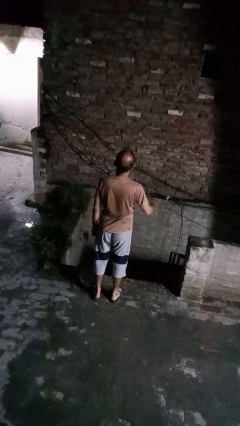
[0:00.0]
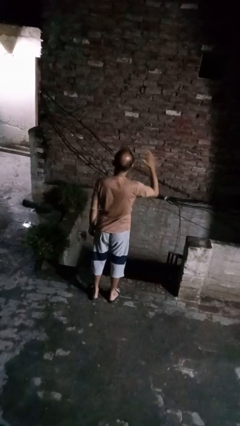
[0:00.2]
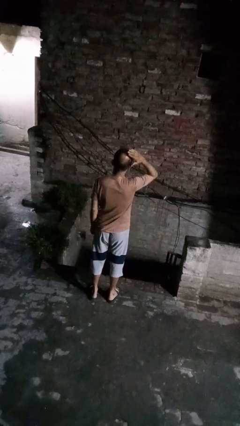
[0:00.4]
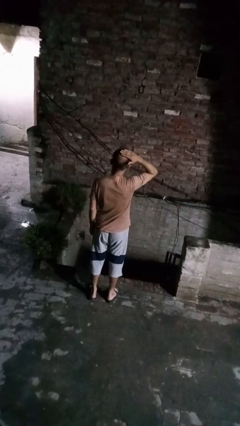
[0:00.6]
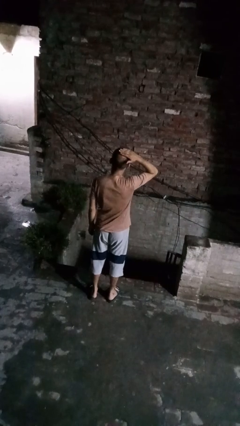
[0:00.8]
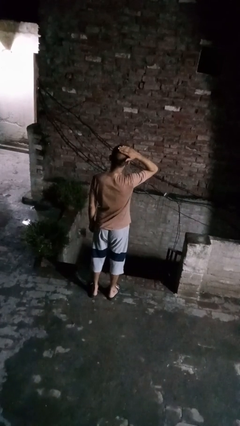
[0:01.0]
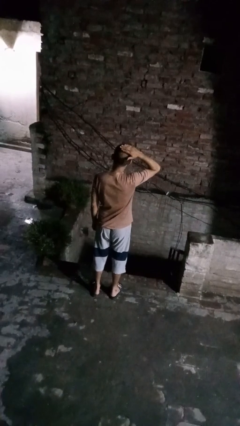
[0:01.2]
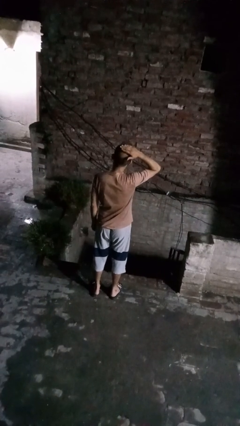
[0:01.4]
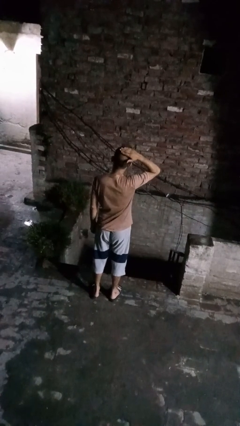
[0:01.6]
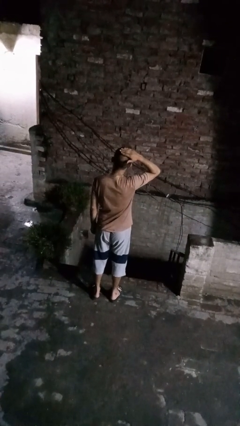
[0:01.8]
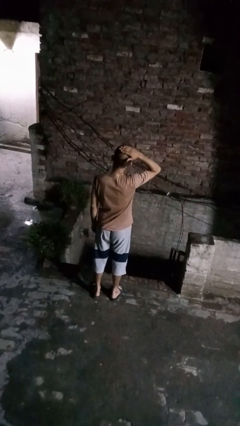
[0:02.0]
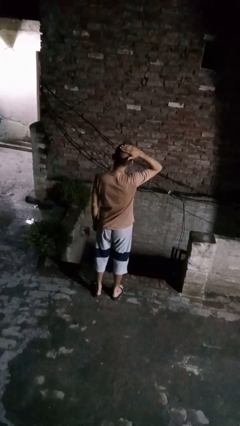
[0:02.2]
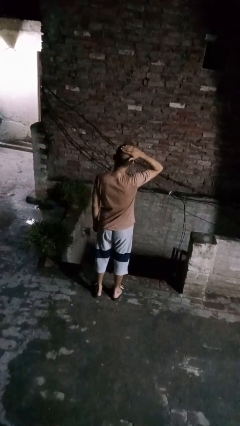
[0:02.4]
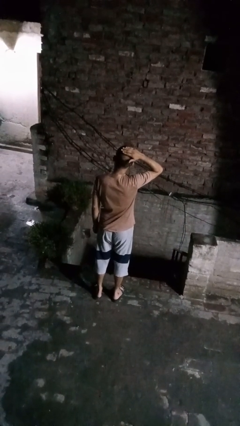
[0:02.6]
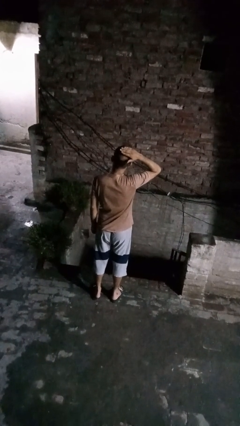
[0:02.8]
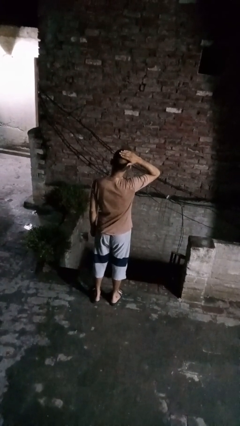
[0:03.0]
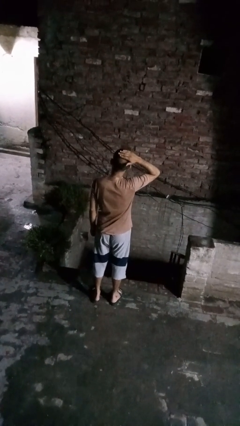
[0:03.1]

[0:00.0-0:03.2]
person pats head

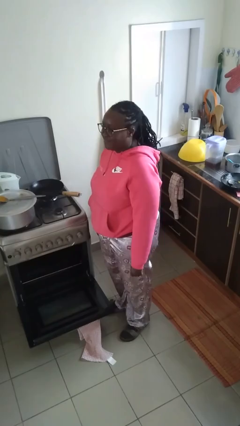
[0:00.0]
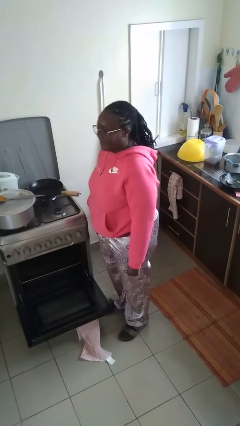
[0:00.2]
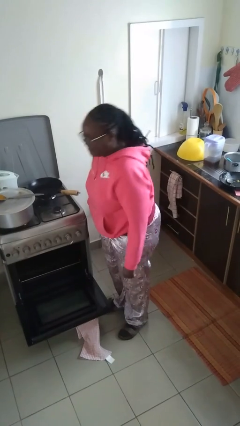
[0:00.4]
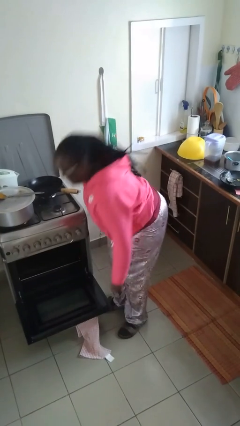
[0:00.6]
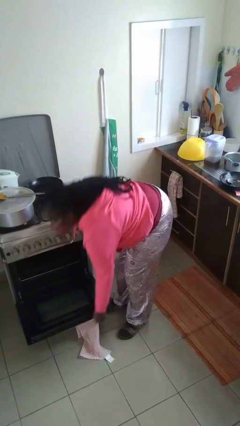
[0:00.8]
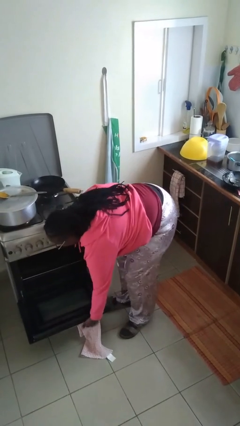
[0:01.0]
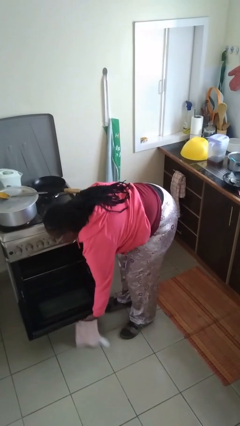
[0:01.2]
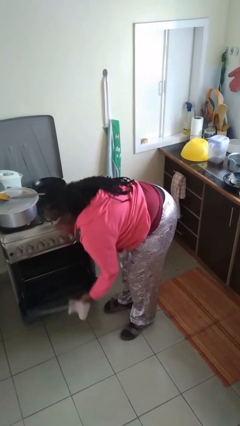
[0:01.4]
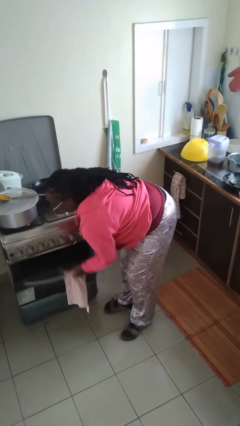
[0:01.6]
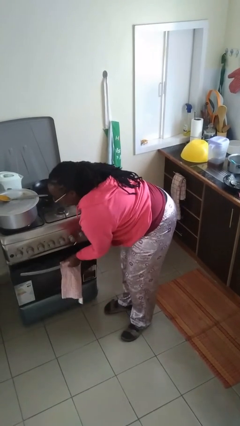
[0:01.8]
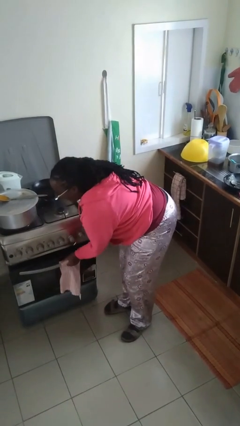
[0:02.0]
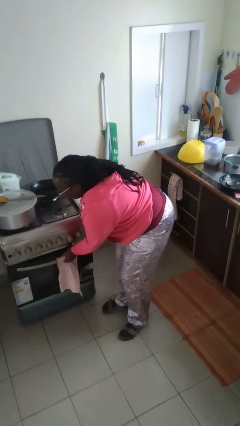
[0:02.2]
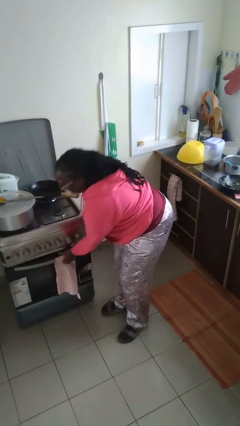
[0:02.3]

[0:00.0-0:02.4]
person closes oven door

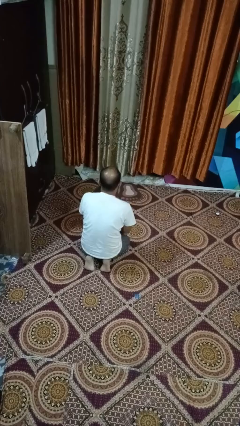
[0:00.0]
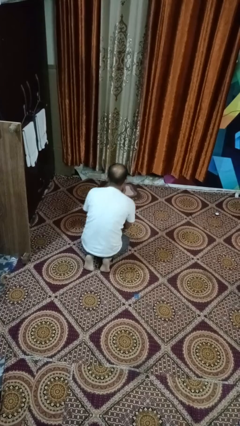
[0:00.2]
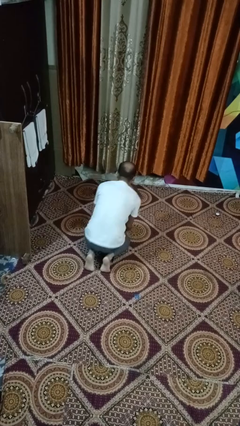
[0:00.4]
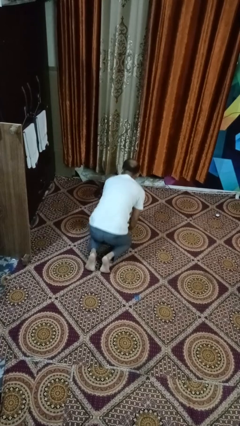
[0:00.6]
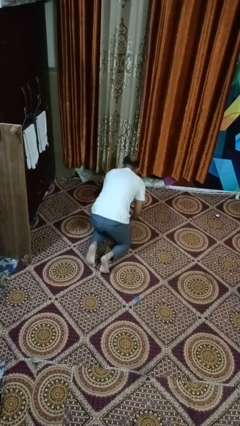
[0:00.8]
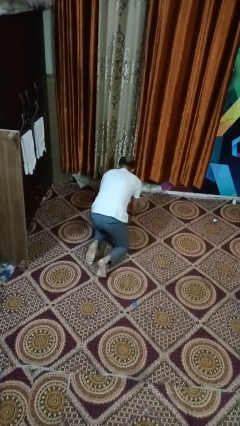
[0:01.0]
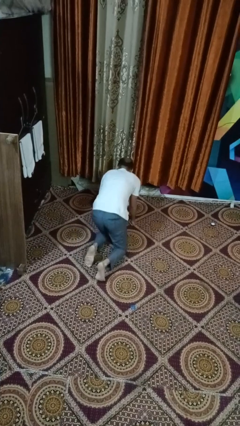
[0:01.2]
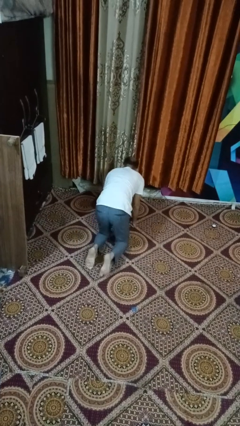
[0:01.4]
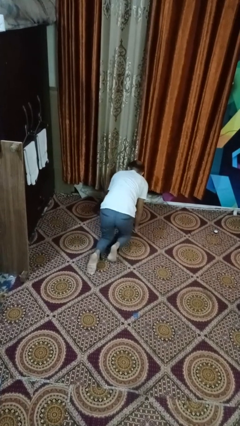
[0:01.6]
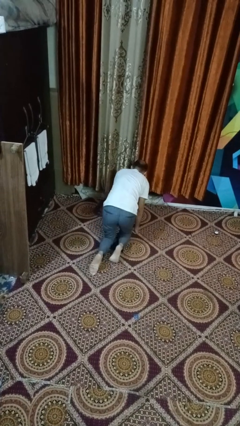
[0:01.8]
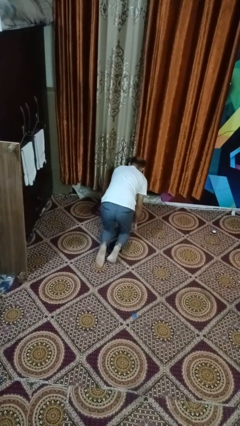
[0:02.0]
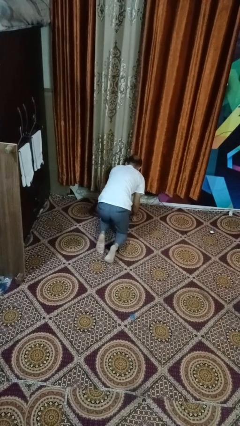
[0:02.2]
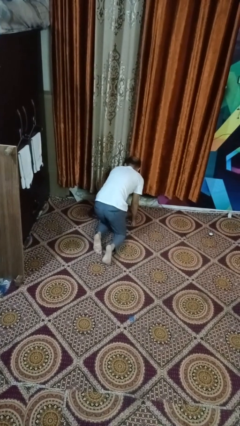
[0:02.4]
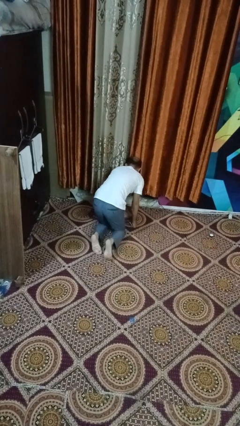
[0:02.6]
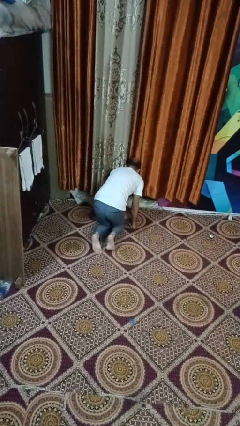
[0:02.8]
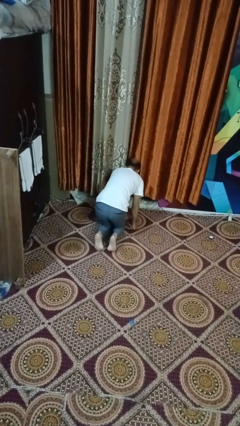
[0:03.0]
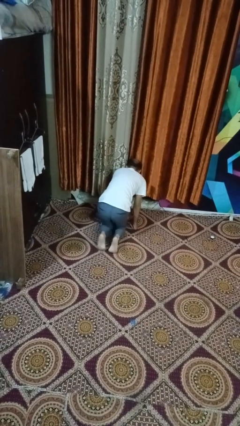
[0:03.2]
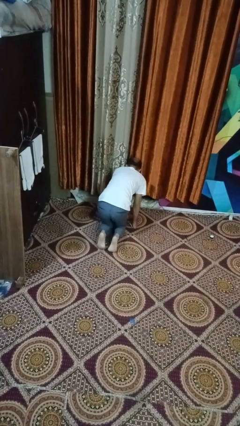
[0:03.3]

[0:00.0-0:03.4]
person crawls

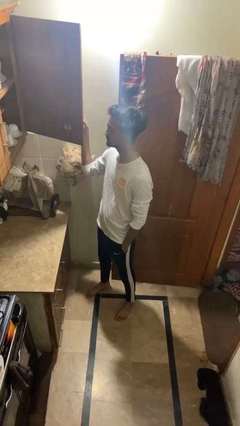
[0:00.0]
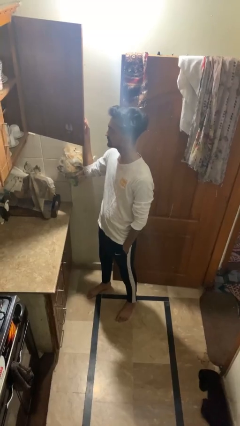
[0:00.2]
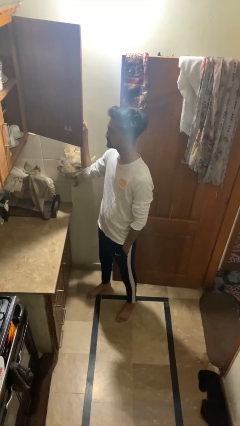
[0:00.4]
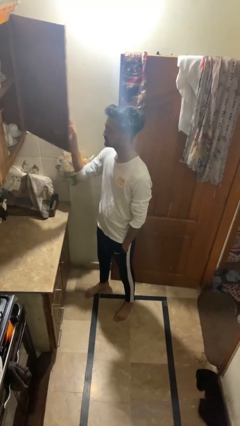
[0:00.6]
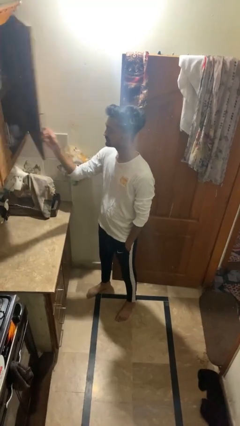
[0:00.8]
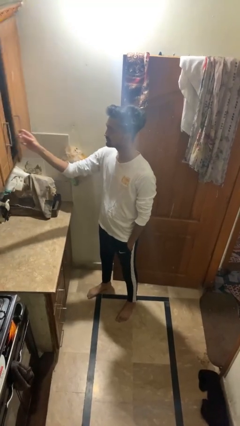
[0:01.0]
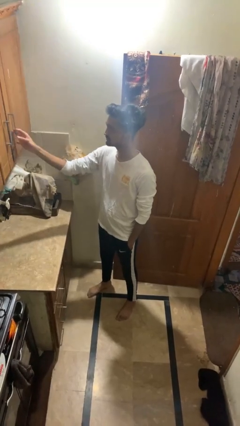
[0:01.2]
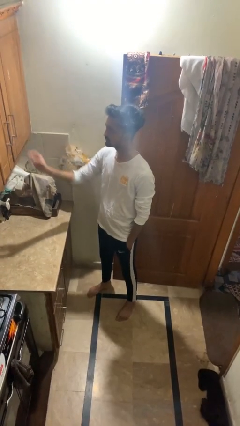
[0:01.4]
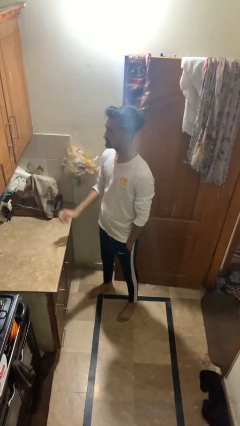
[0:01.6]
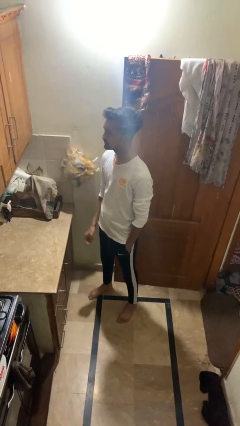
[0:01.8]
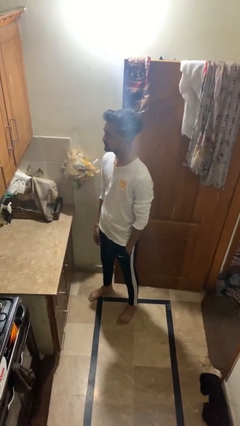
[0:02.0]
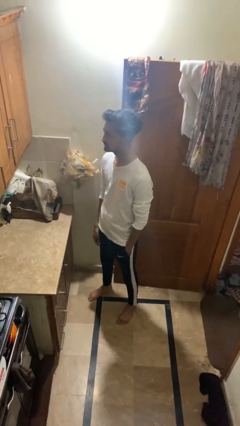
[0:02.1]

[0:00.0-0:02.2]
person closes cabinet

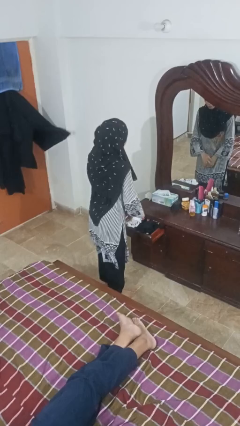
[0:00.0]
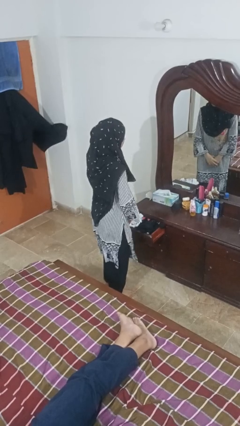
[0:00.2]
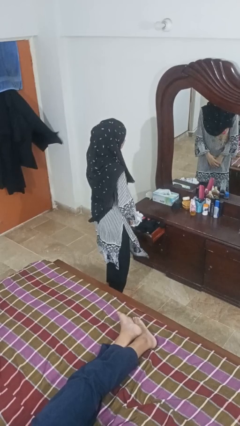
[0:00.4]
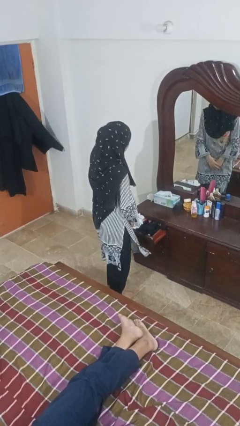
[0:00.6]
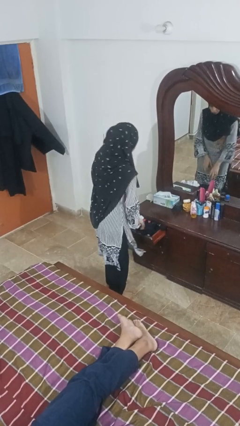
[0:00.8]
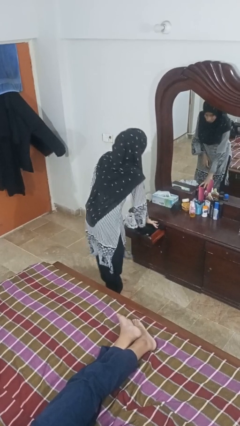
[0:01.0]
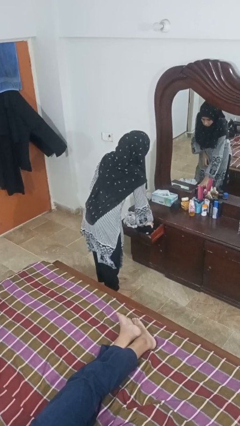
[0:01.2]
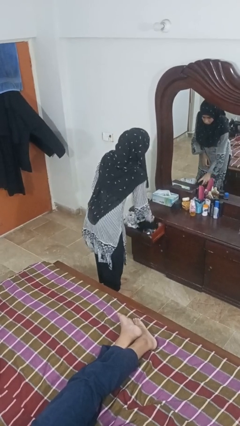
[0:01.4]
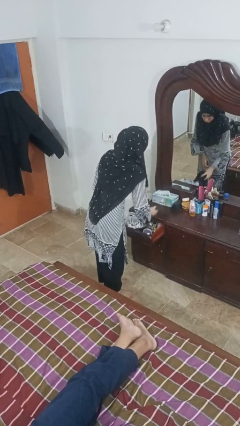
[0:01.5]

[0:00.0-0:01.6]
person takes clothes from dresser

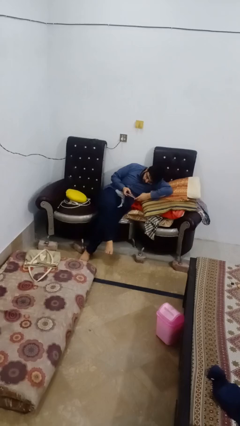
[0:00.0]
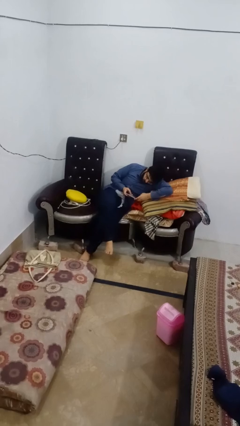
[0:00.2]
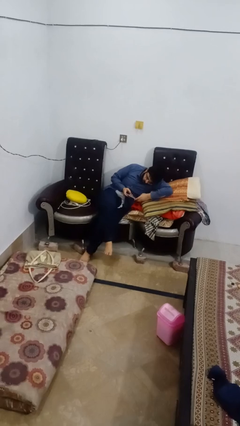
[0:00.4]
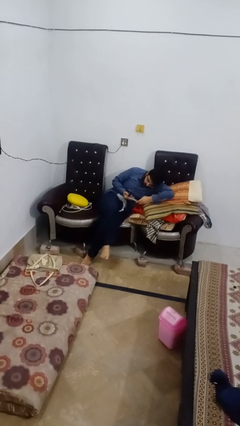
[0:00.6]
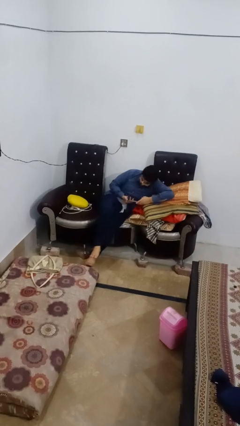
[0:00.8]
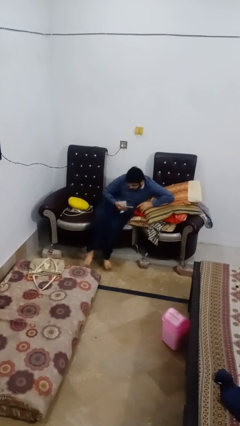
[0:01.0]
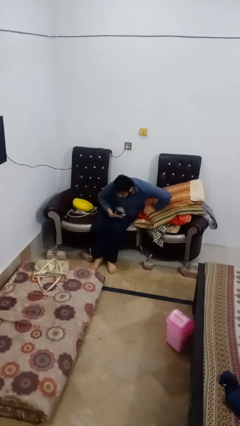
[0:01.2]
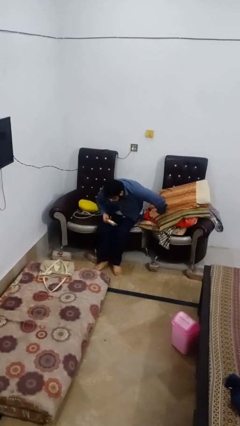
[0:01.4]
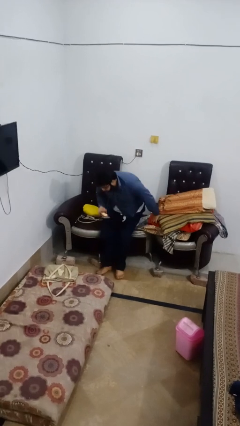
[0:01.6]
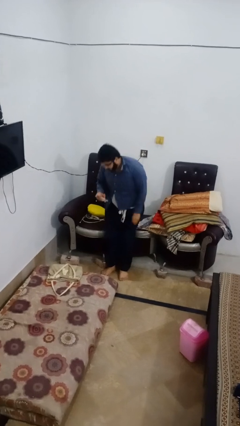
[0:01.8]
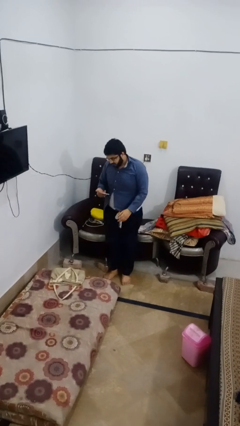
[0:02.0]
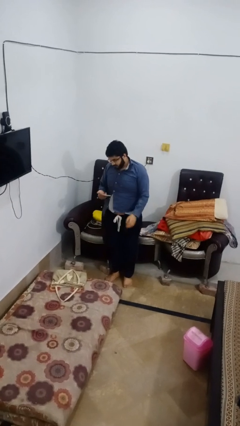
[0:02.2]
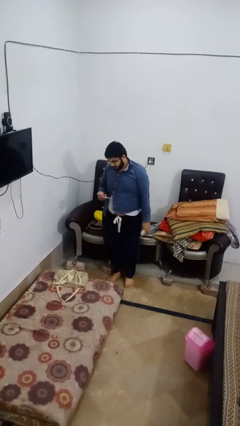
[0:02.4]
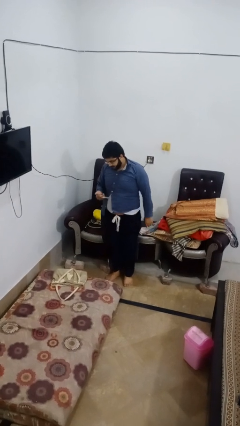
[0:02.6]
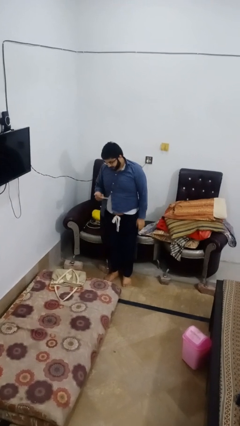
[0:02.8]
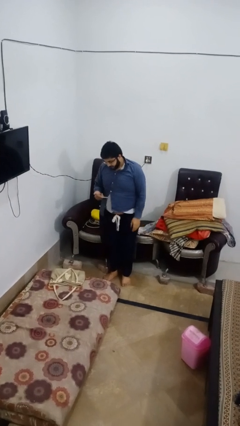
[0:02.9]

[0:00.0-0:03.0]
person stands up

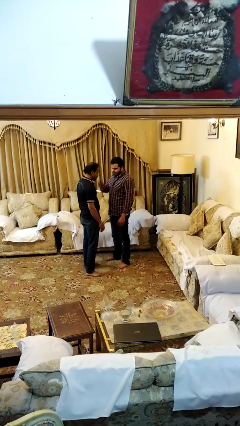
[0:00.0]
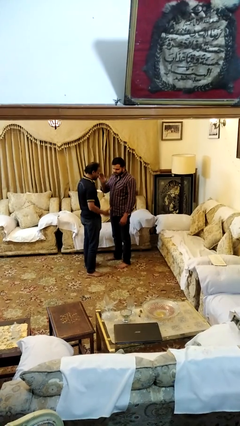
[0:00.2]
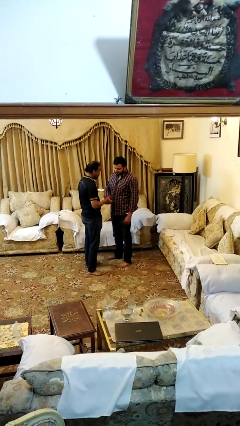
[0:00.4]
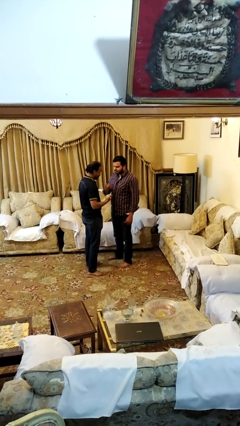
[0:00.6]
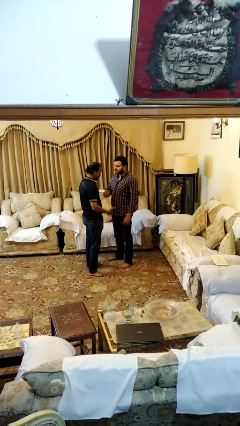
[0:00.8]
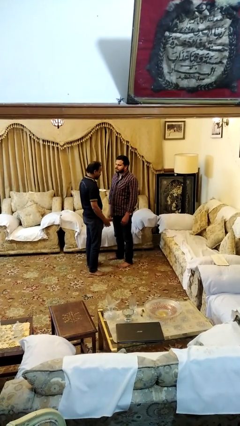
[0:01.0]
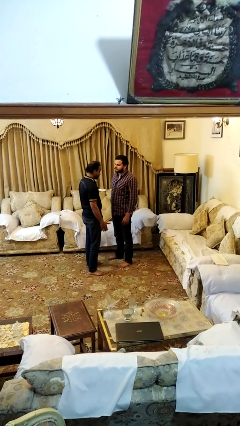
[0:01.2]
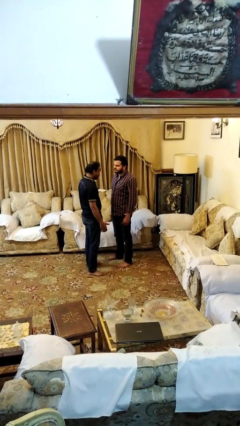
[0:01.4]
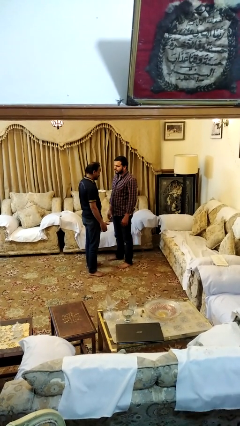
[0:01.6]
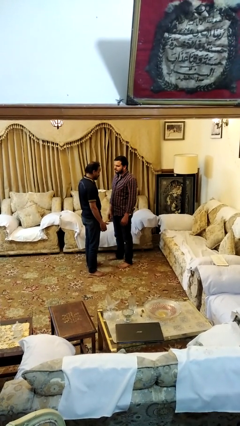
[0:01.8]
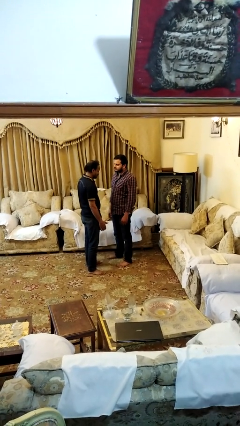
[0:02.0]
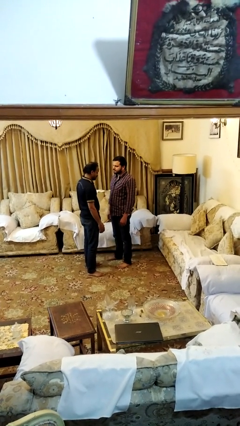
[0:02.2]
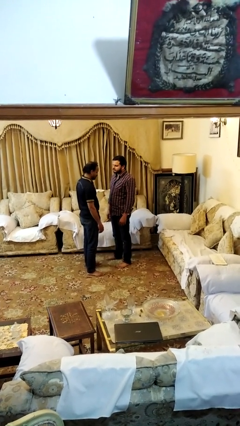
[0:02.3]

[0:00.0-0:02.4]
person highfives hand
